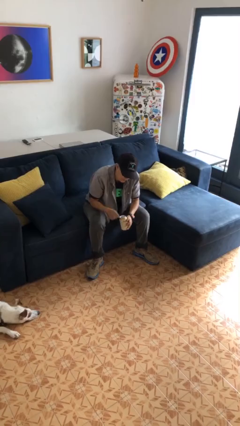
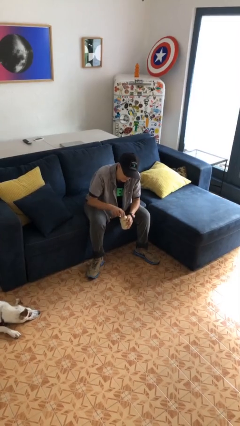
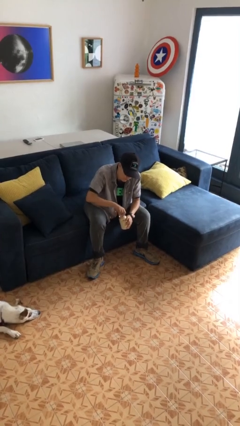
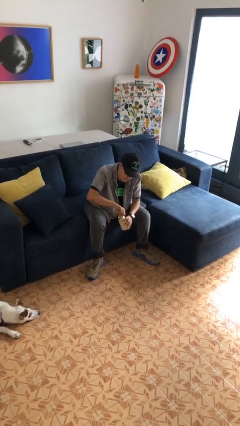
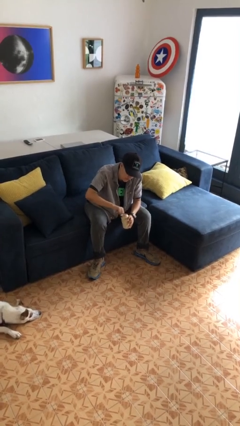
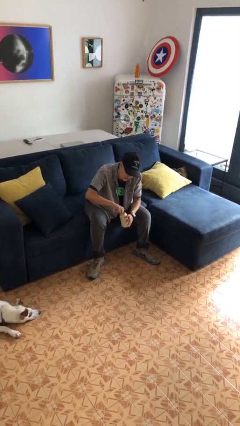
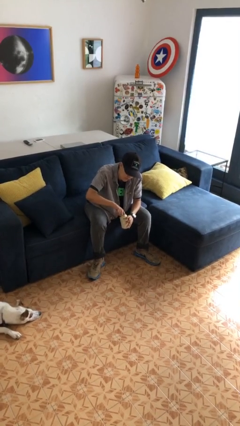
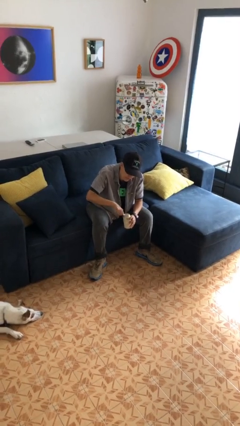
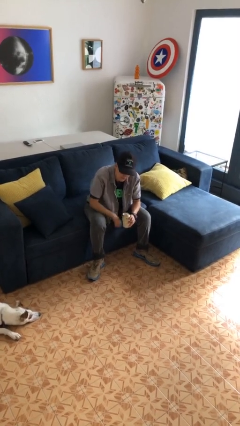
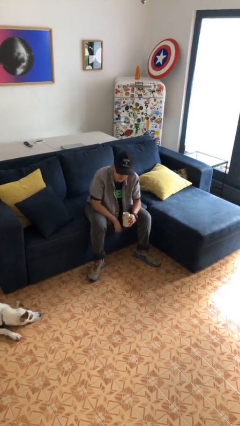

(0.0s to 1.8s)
person opens beverage can

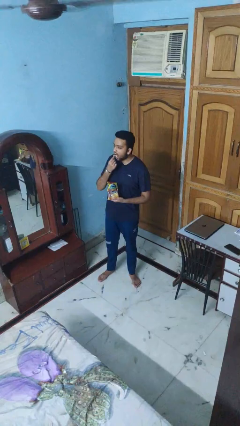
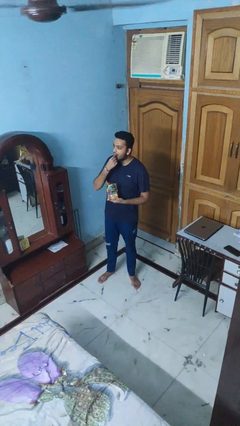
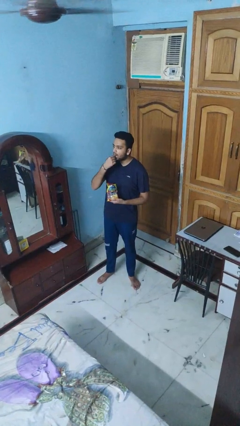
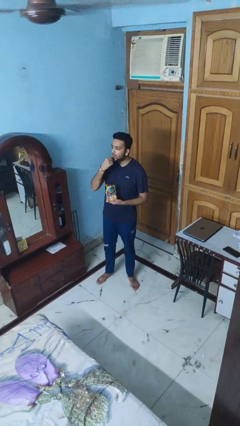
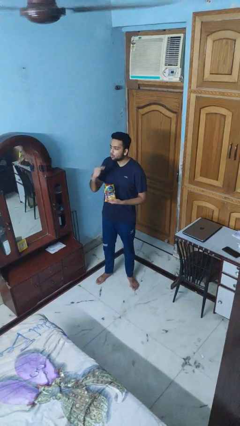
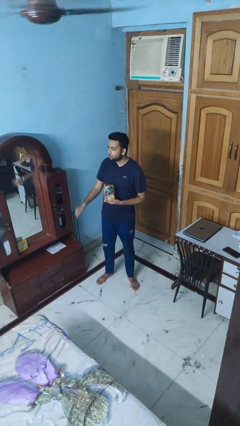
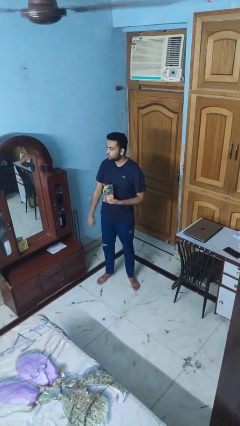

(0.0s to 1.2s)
person eats snack from bag

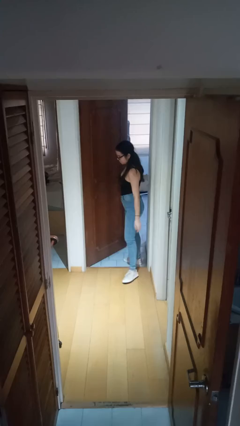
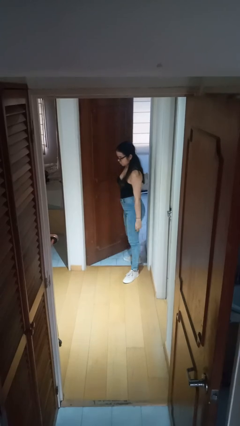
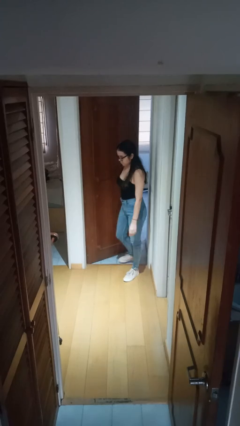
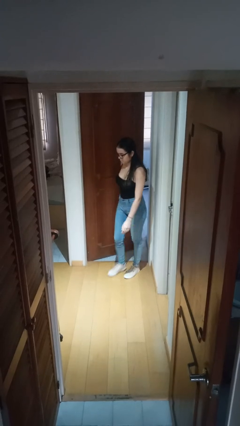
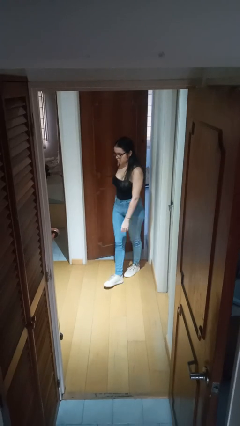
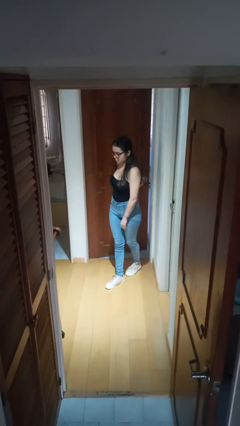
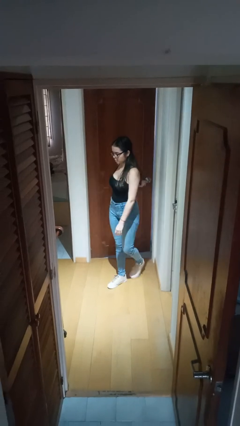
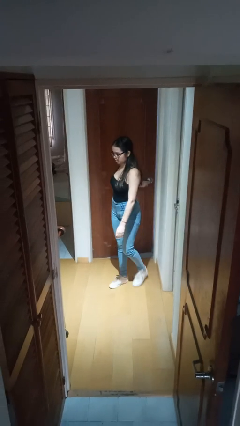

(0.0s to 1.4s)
person closes facility door

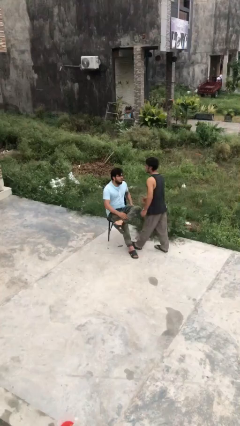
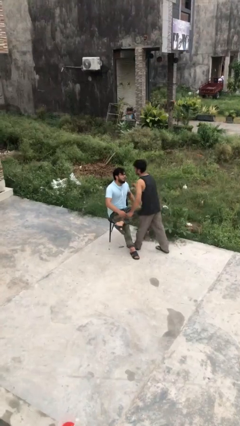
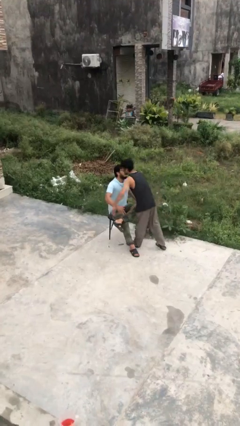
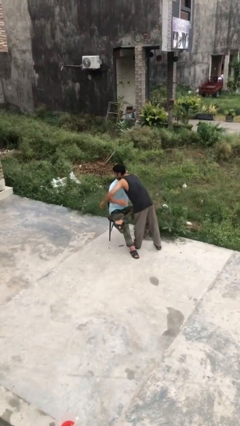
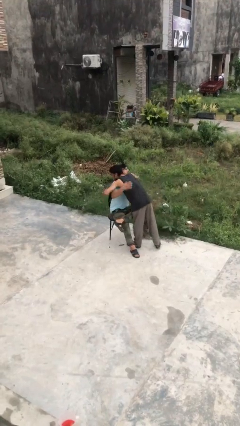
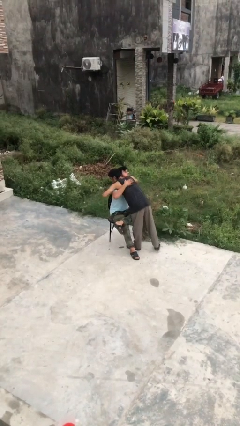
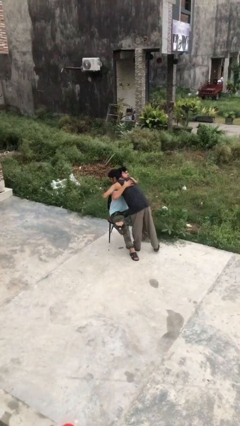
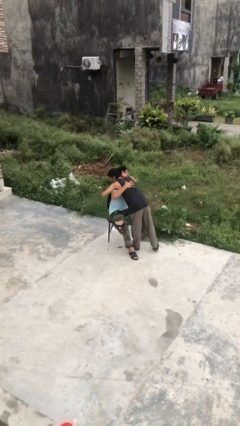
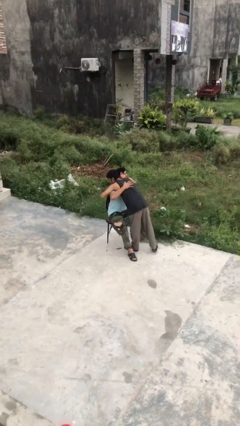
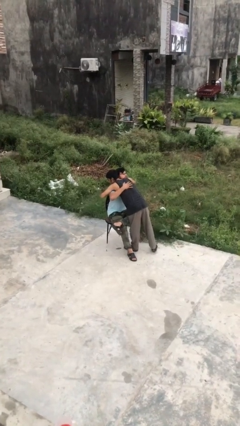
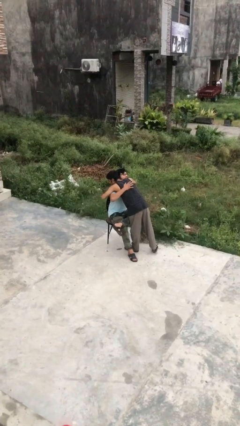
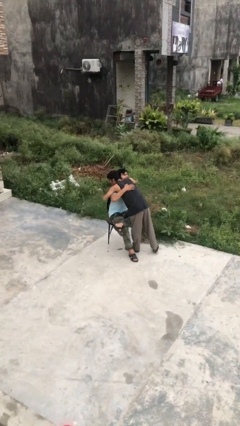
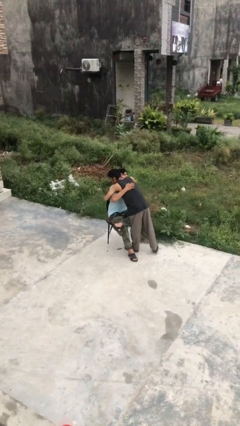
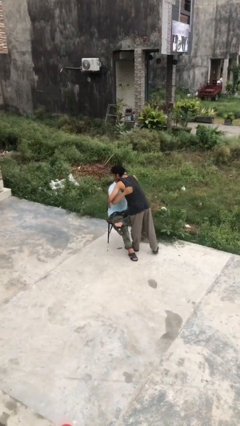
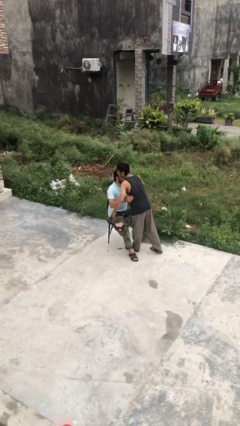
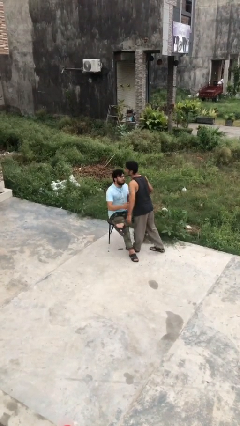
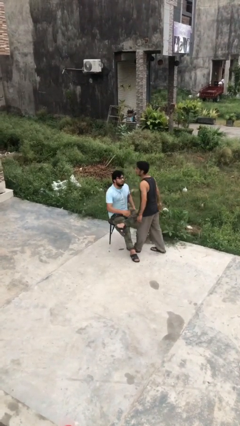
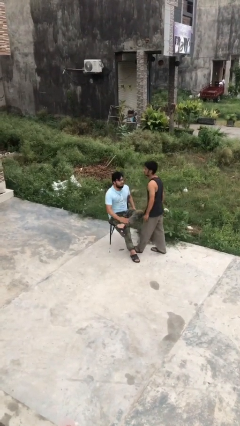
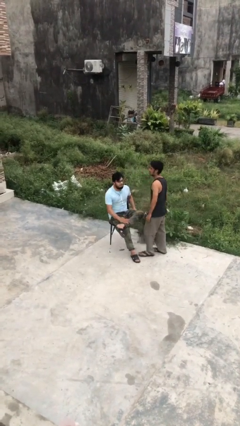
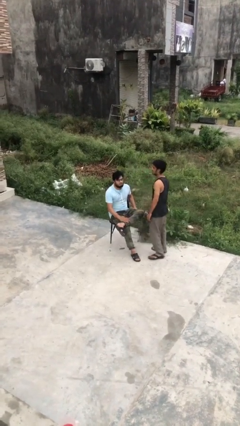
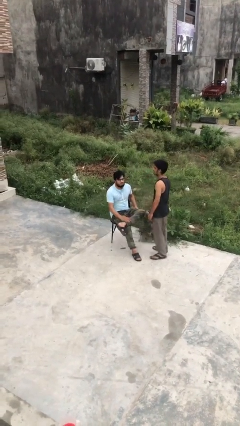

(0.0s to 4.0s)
person embraces person

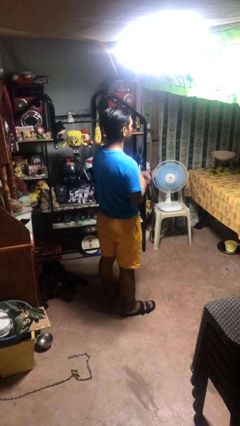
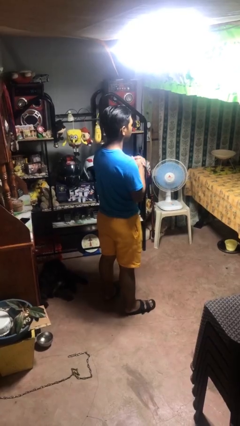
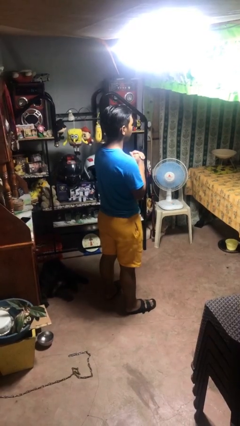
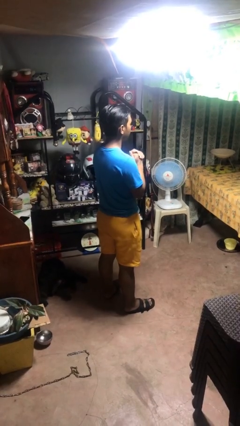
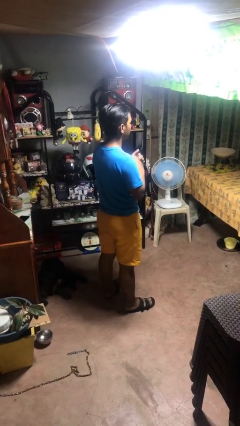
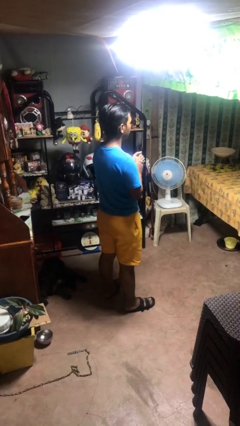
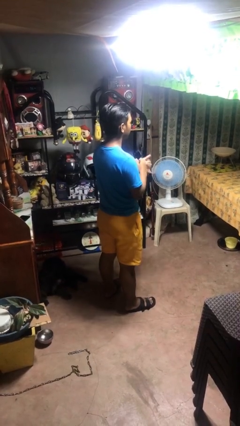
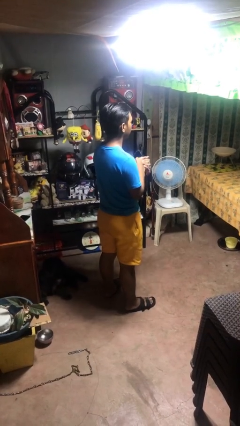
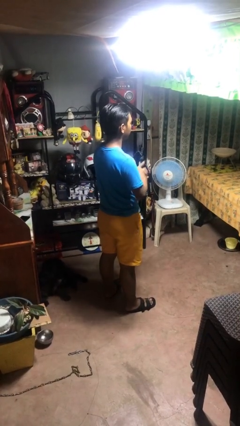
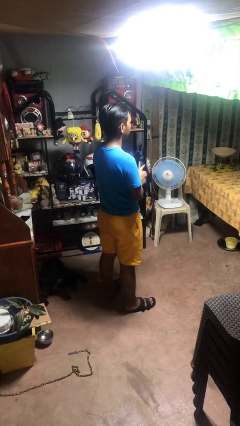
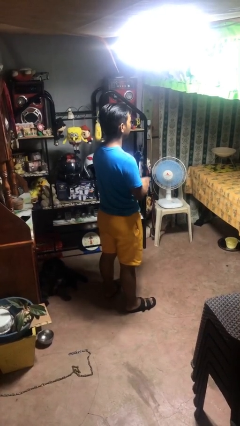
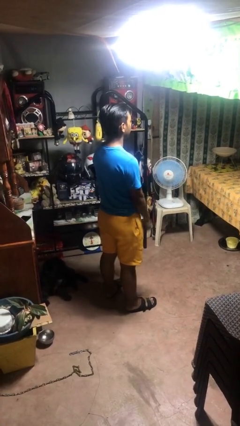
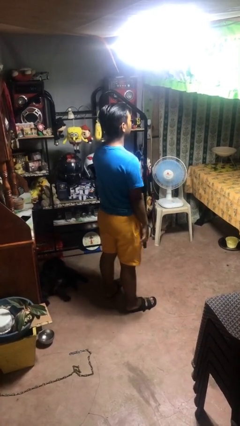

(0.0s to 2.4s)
person cracks knuckles

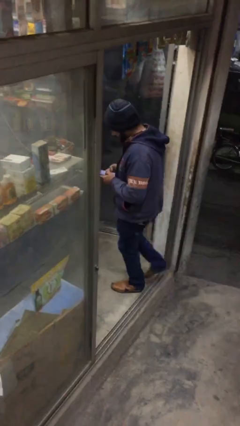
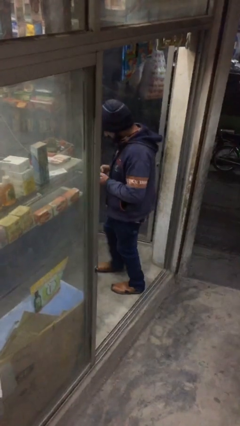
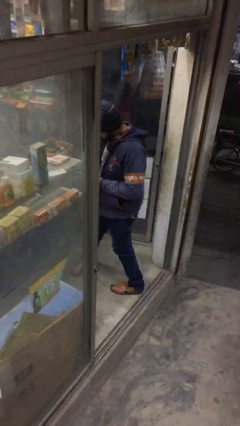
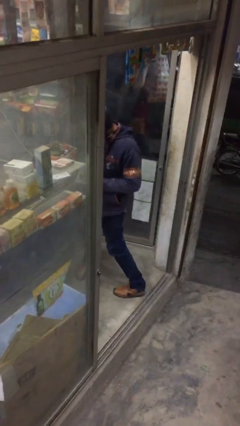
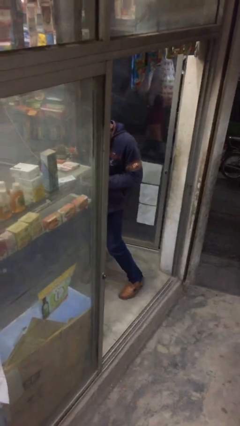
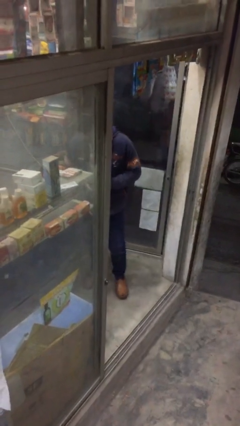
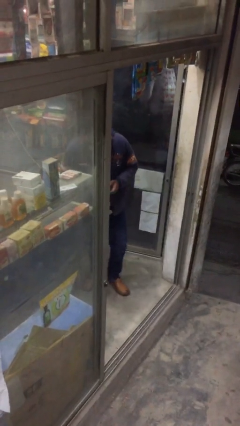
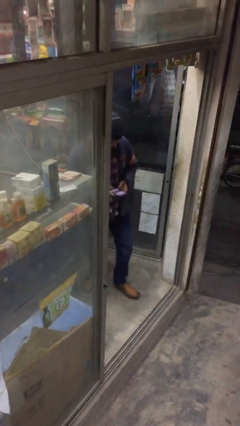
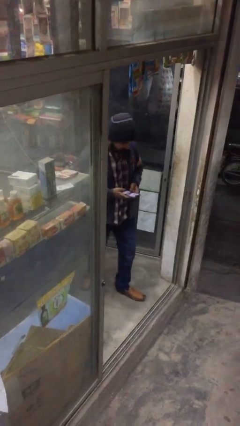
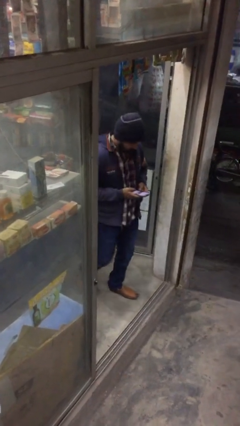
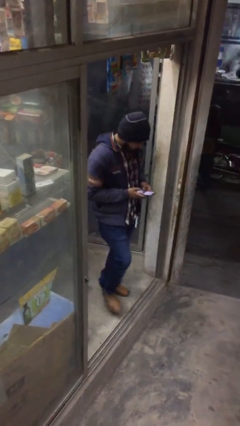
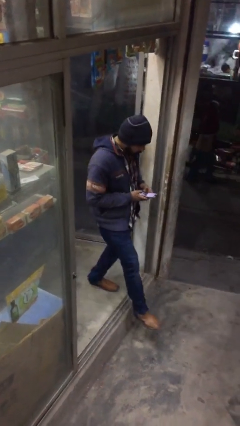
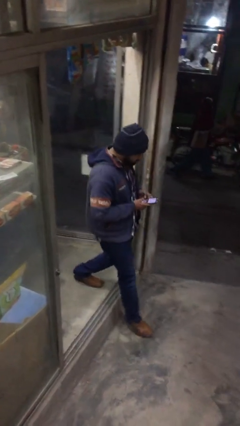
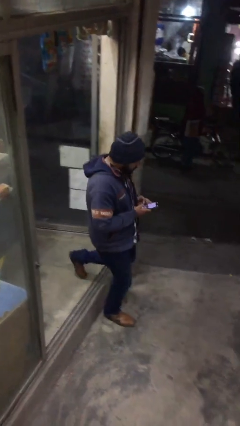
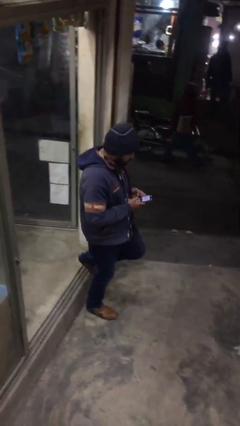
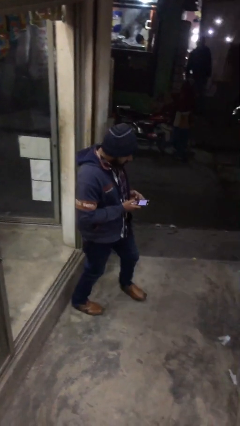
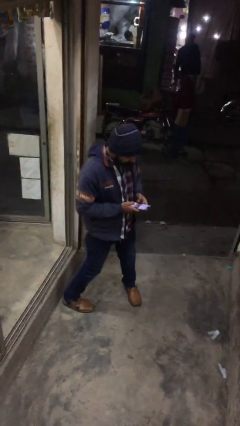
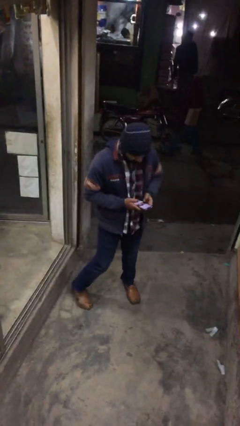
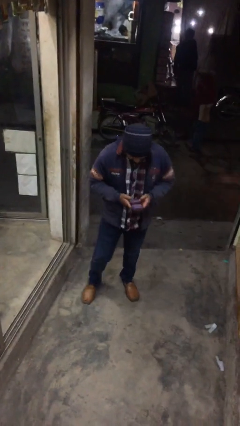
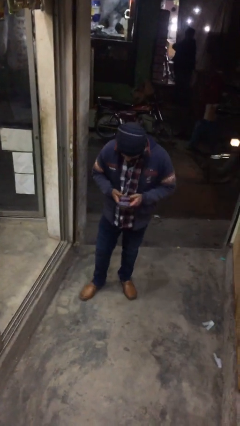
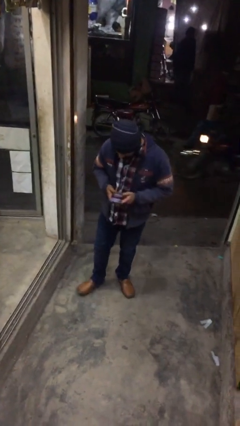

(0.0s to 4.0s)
person exits scene through structure

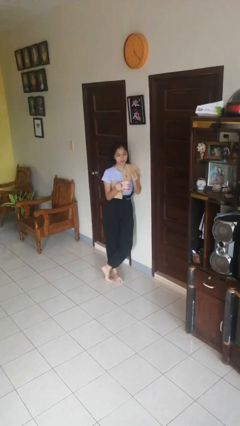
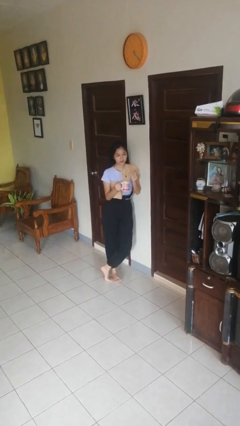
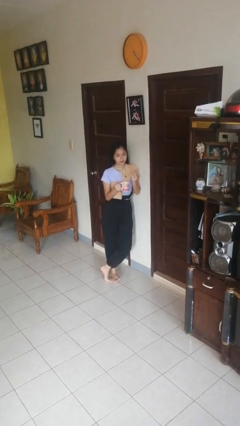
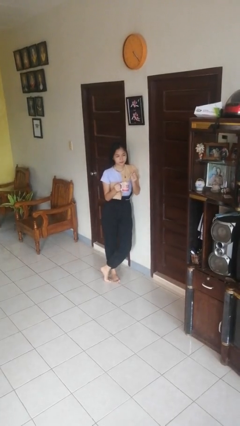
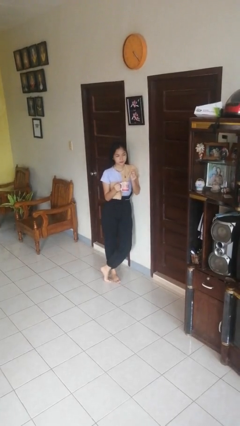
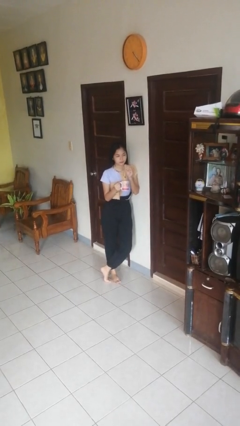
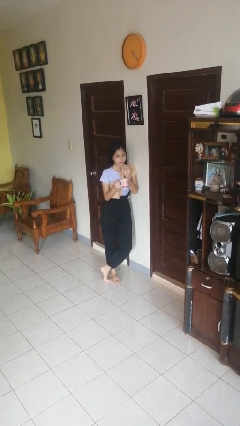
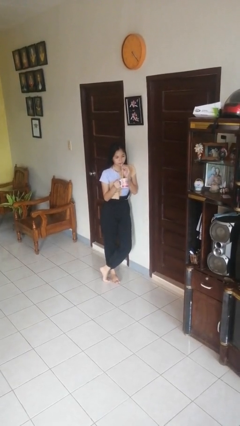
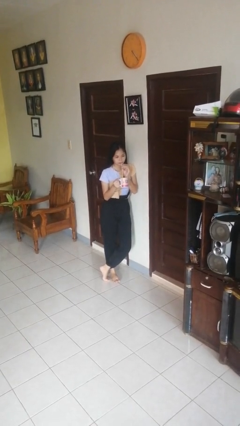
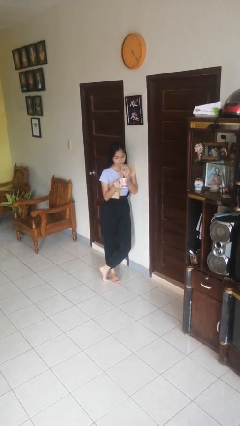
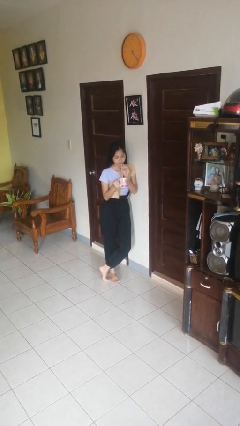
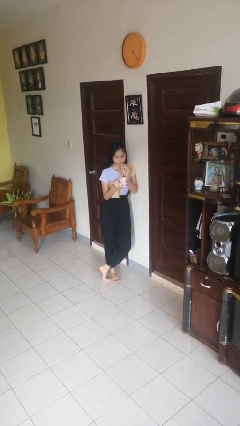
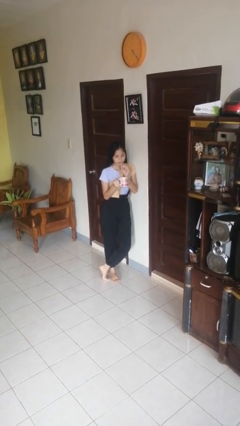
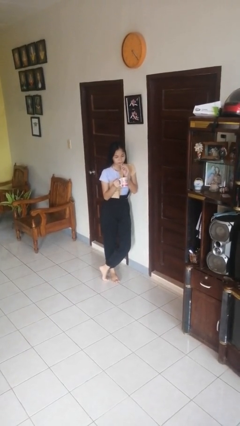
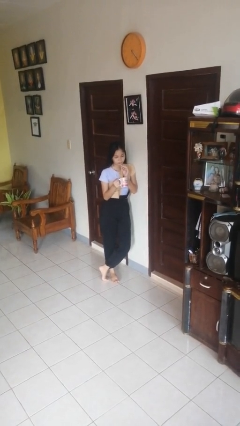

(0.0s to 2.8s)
person drinks from straw
